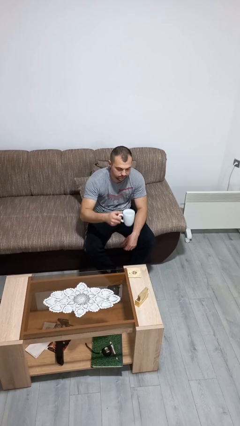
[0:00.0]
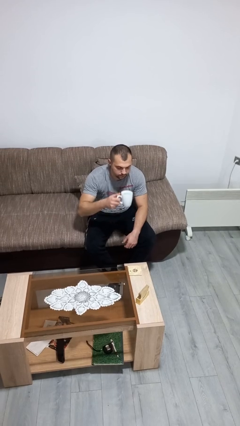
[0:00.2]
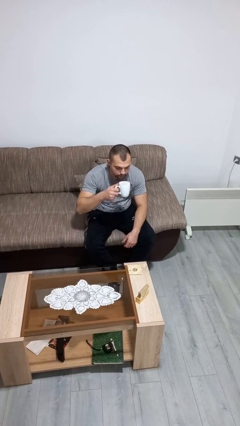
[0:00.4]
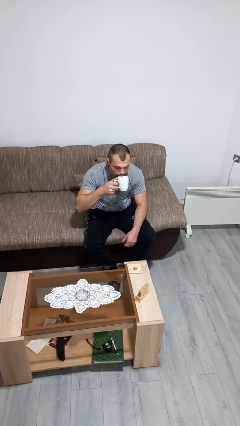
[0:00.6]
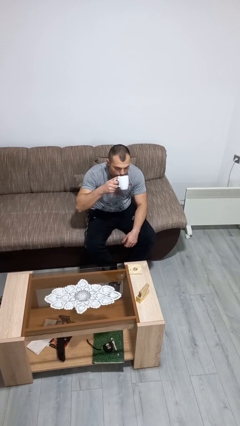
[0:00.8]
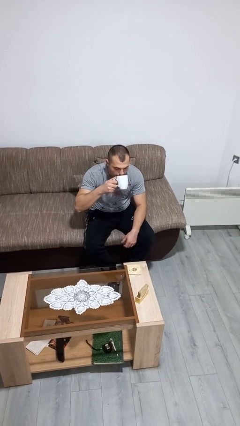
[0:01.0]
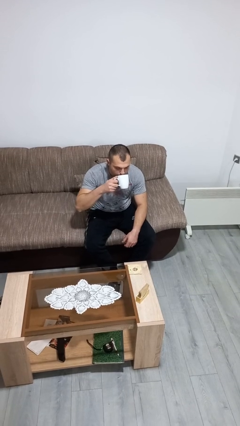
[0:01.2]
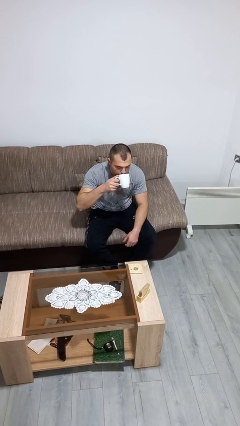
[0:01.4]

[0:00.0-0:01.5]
person drinks from mug

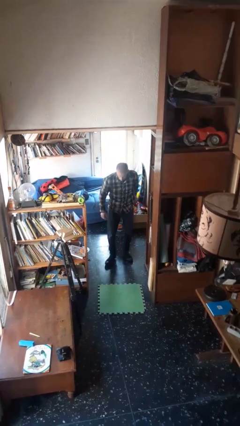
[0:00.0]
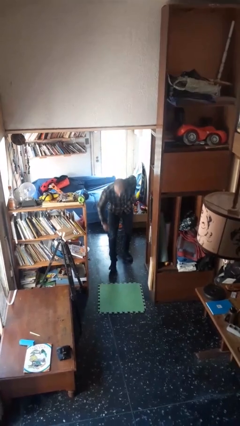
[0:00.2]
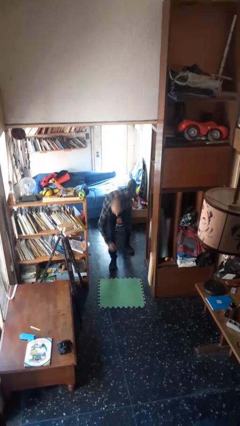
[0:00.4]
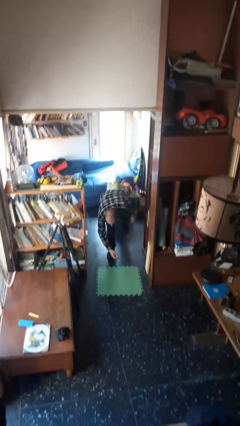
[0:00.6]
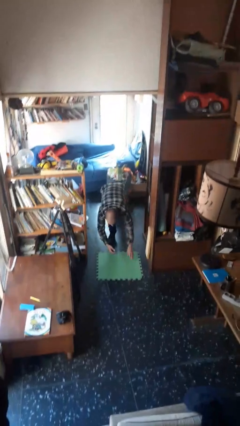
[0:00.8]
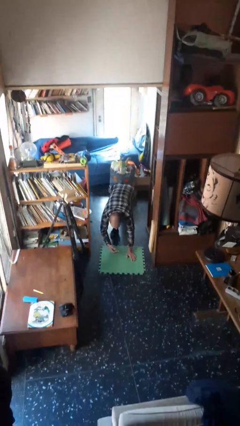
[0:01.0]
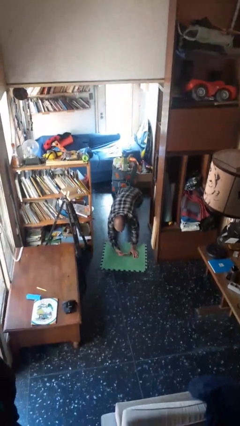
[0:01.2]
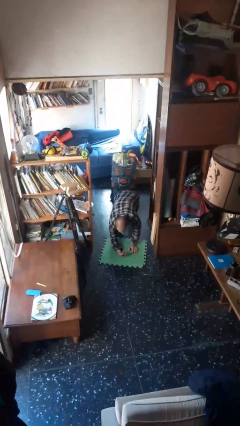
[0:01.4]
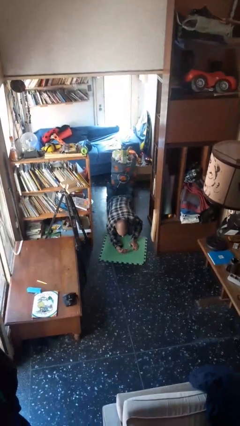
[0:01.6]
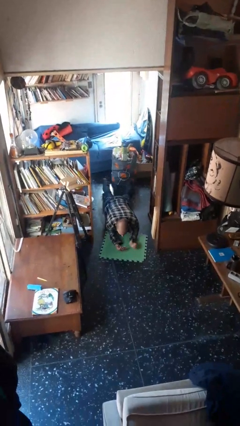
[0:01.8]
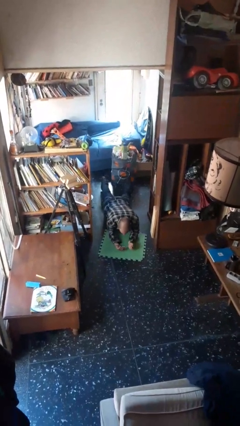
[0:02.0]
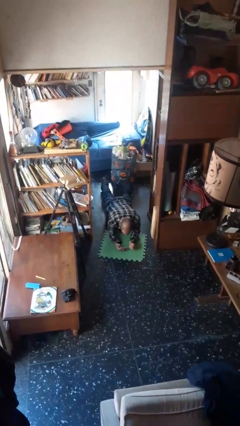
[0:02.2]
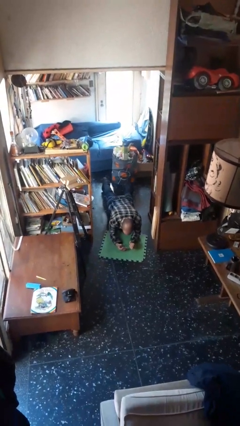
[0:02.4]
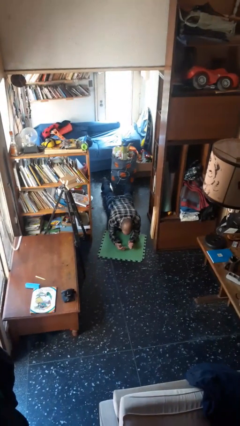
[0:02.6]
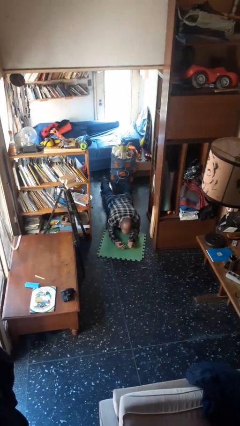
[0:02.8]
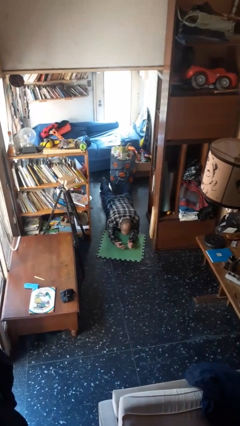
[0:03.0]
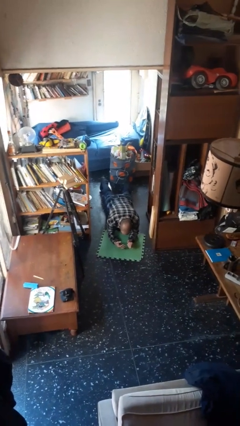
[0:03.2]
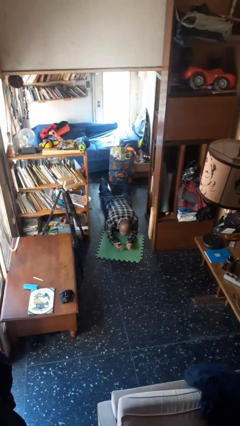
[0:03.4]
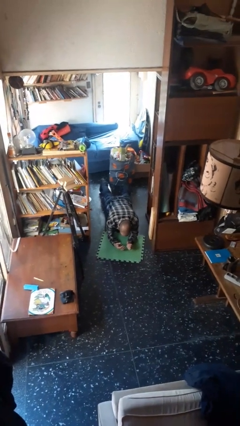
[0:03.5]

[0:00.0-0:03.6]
person exercises with plank

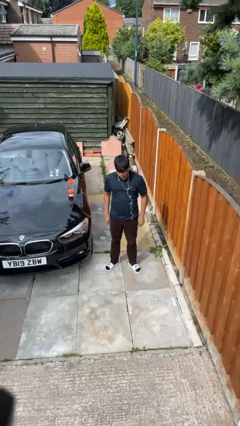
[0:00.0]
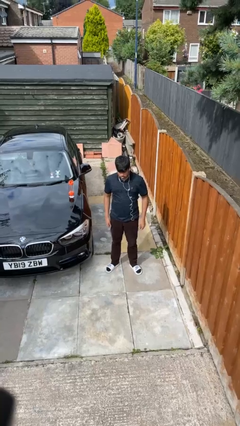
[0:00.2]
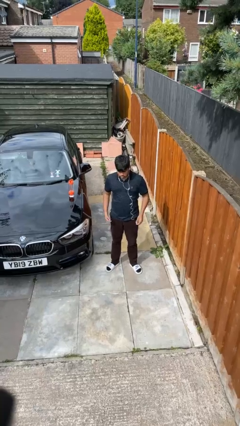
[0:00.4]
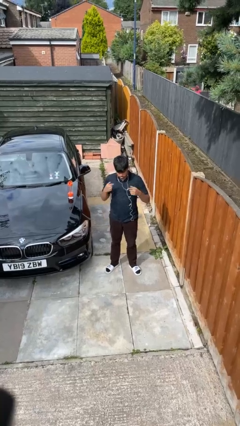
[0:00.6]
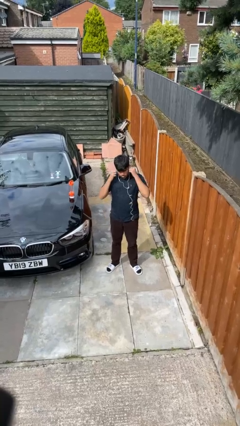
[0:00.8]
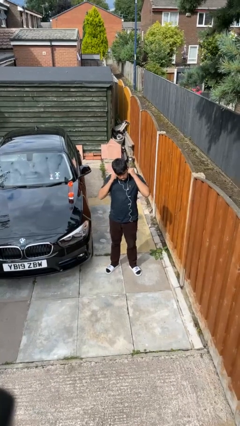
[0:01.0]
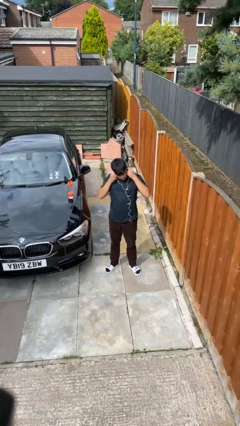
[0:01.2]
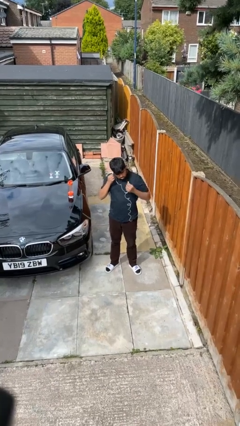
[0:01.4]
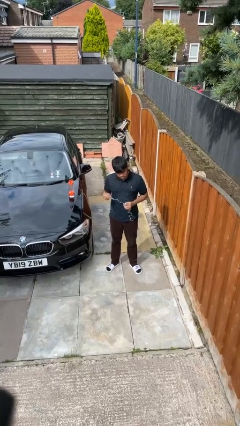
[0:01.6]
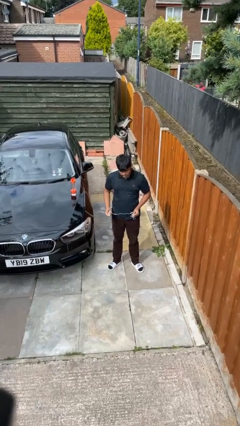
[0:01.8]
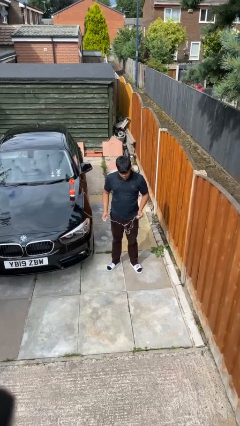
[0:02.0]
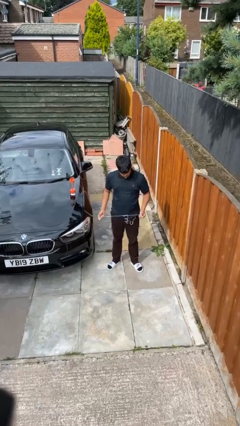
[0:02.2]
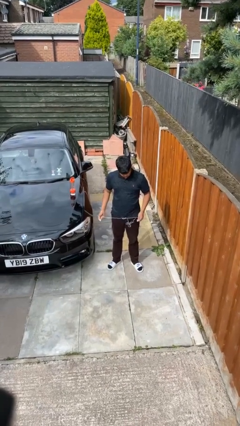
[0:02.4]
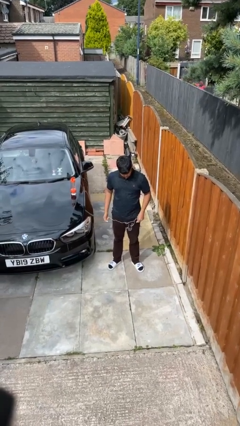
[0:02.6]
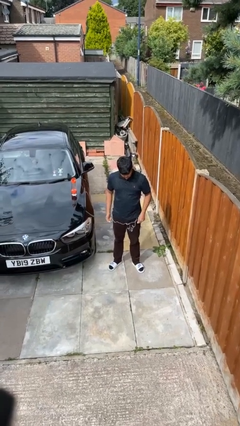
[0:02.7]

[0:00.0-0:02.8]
person takes off headphones

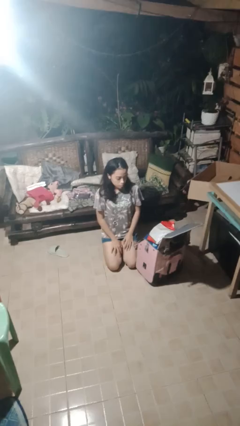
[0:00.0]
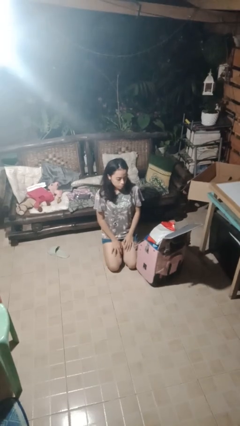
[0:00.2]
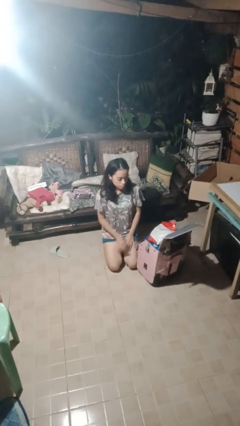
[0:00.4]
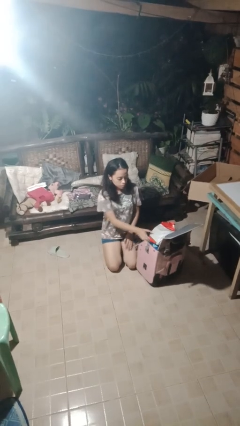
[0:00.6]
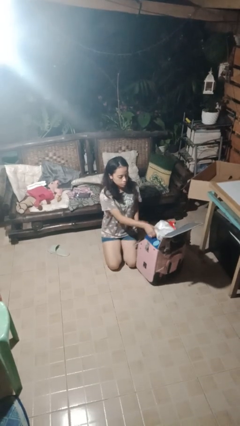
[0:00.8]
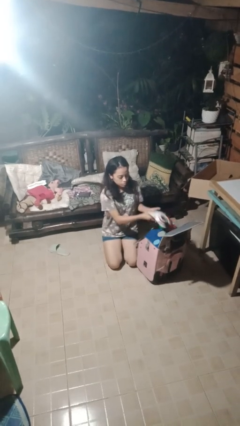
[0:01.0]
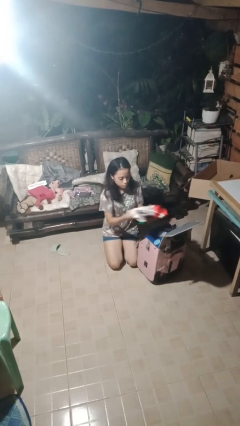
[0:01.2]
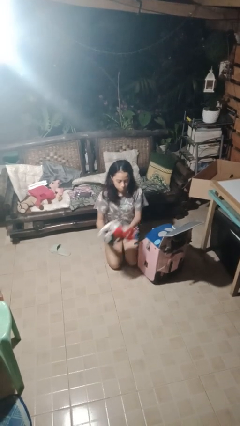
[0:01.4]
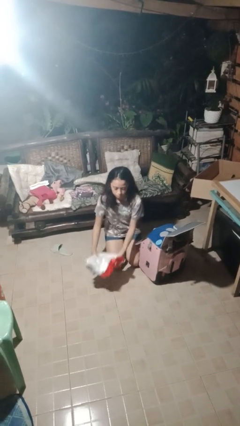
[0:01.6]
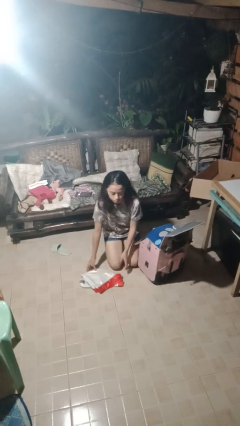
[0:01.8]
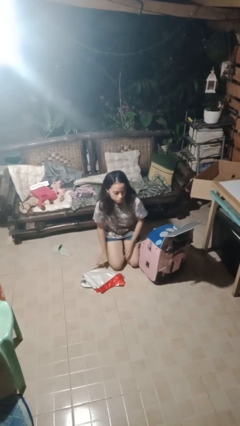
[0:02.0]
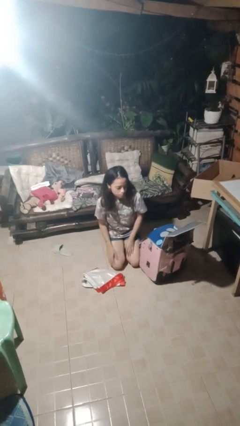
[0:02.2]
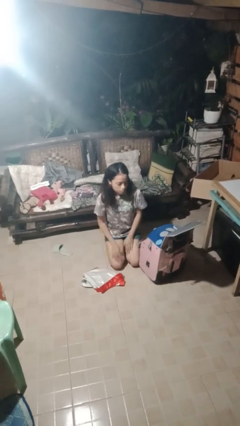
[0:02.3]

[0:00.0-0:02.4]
person unloads clothes from suitcase

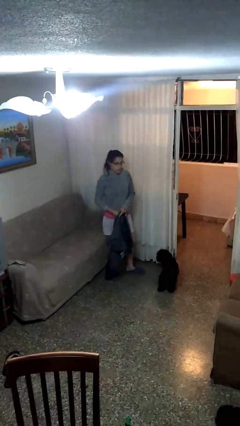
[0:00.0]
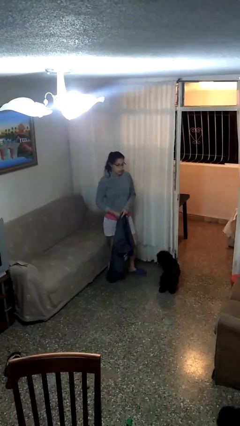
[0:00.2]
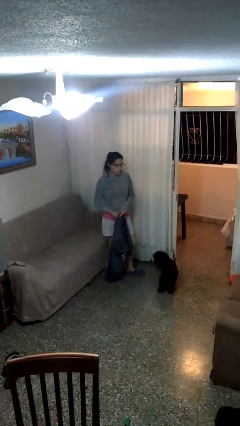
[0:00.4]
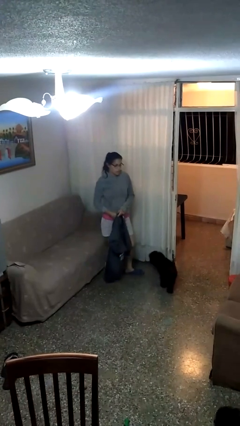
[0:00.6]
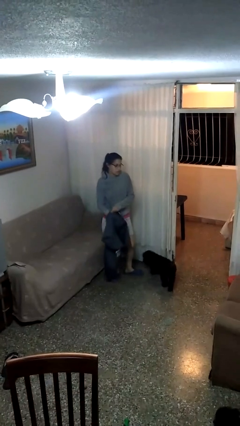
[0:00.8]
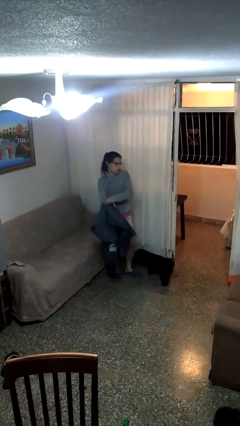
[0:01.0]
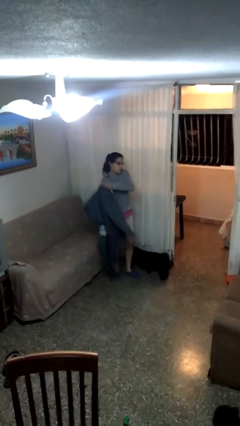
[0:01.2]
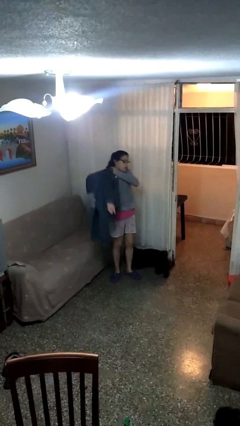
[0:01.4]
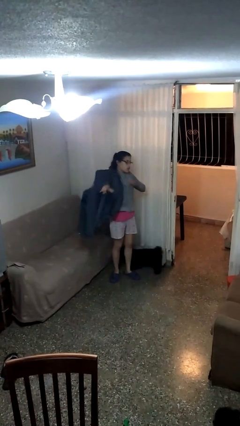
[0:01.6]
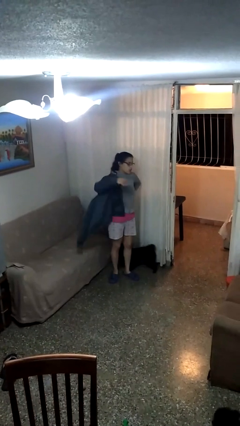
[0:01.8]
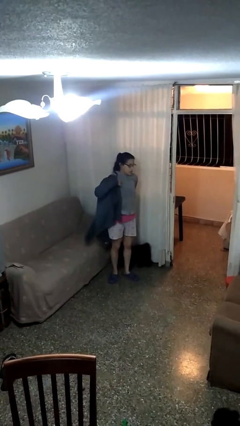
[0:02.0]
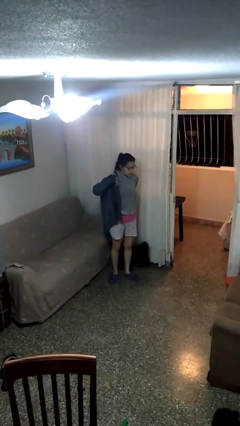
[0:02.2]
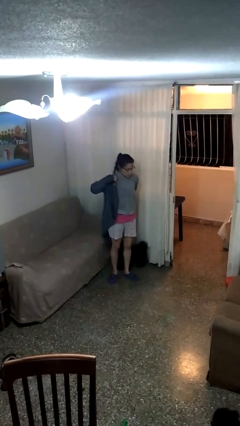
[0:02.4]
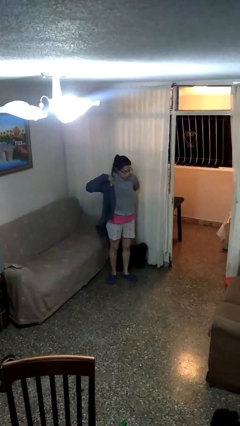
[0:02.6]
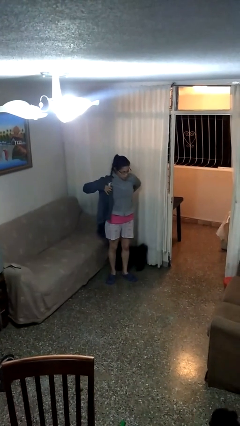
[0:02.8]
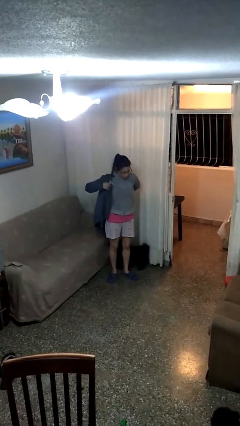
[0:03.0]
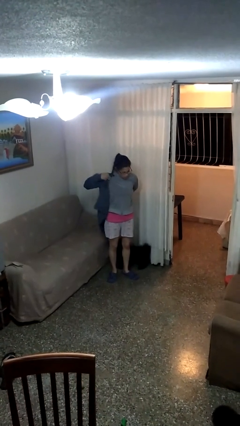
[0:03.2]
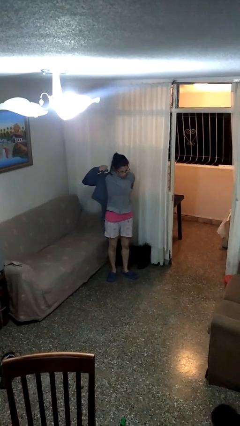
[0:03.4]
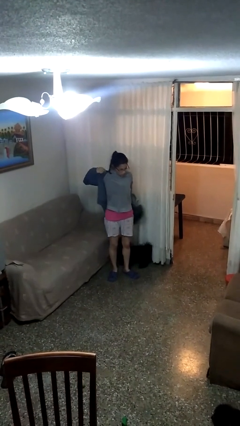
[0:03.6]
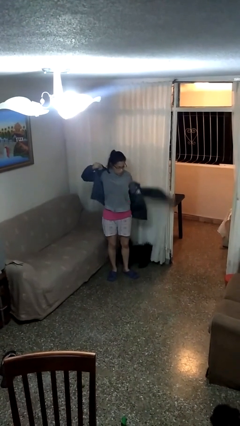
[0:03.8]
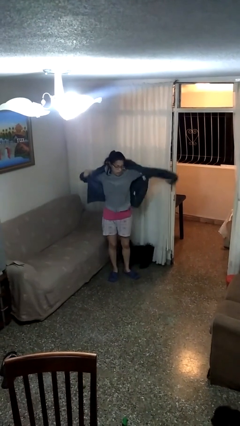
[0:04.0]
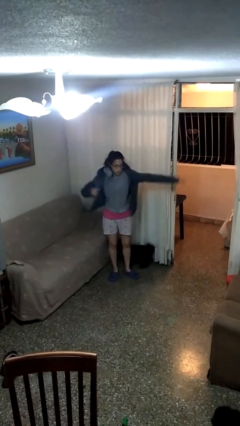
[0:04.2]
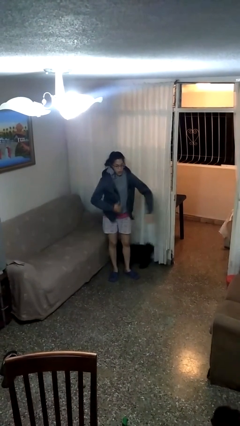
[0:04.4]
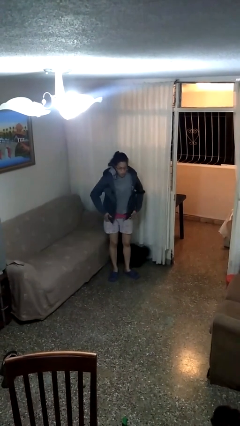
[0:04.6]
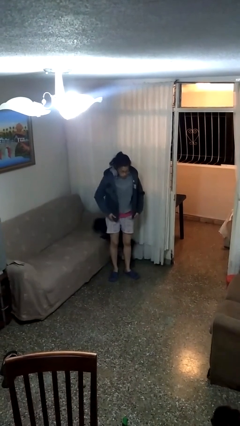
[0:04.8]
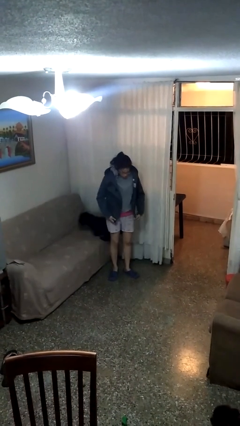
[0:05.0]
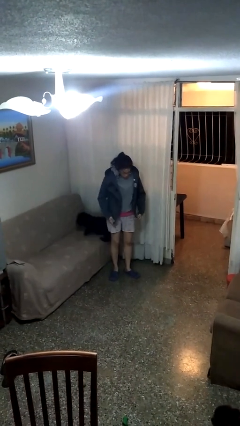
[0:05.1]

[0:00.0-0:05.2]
person puts on jacket

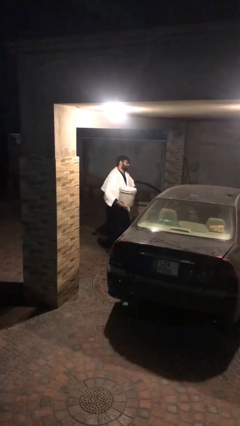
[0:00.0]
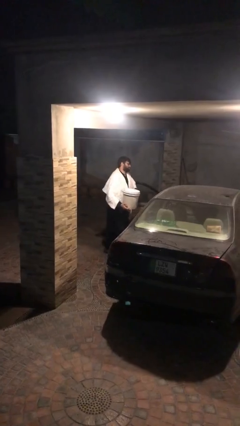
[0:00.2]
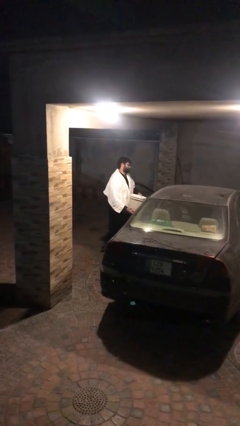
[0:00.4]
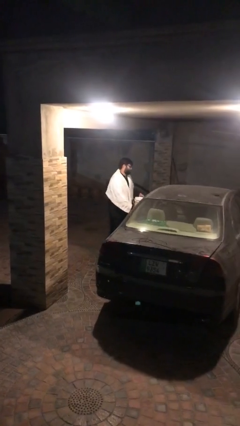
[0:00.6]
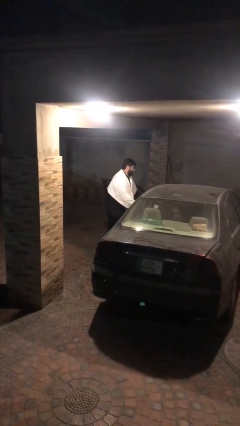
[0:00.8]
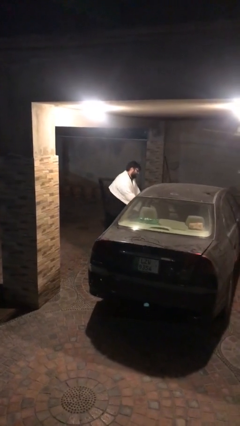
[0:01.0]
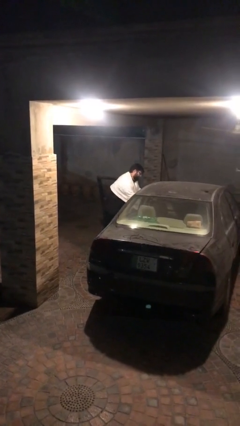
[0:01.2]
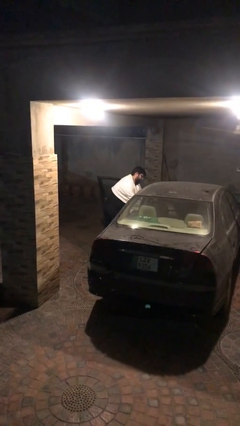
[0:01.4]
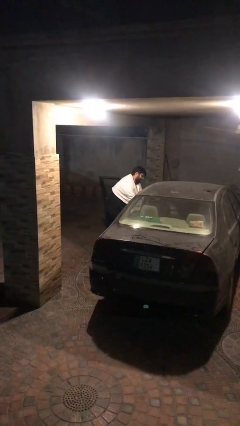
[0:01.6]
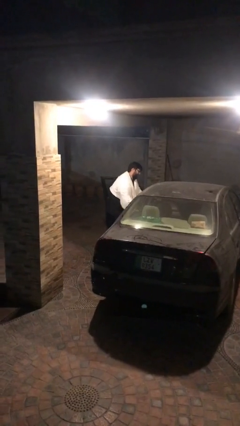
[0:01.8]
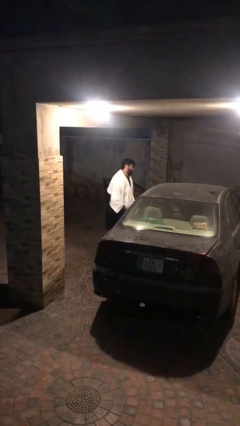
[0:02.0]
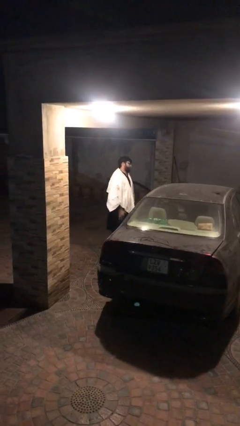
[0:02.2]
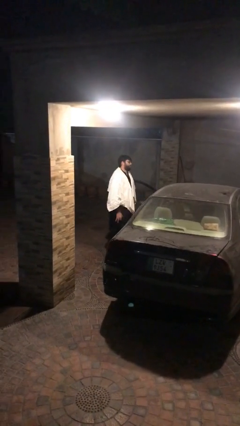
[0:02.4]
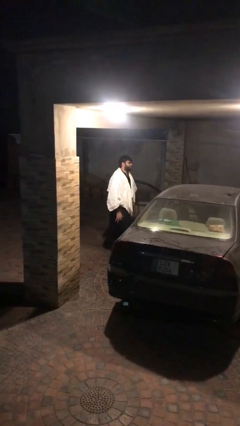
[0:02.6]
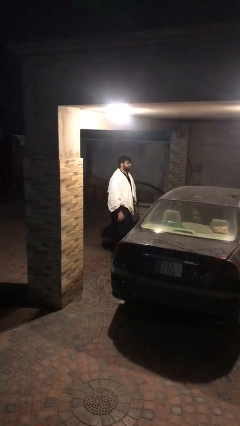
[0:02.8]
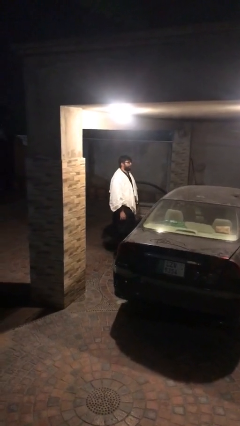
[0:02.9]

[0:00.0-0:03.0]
person loads car
